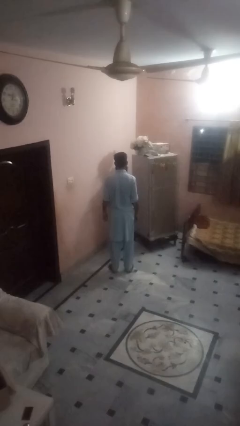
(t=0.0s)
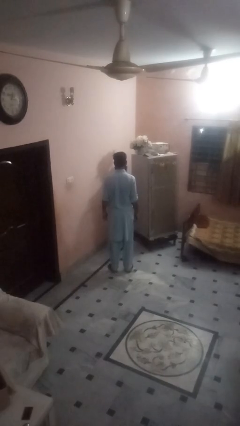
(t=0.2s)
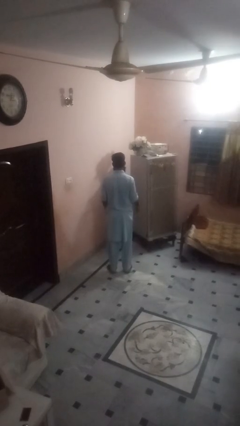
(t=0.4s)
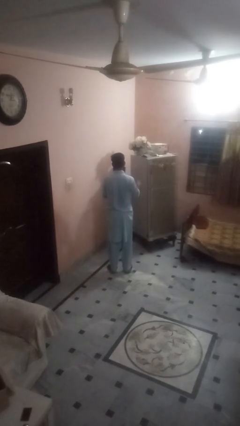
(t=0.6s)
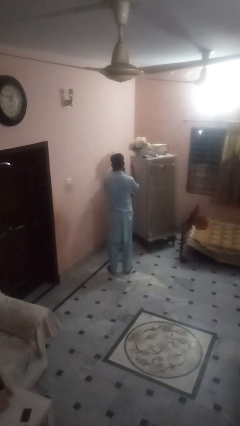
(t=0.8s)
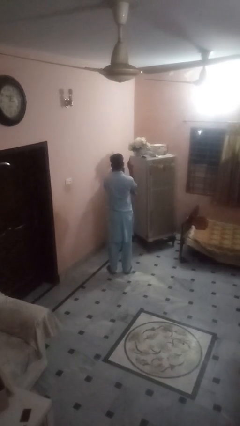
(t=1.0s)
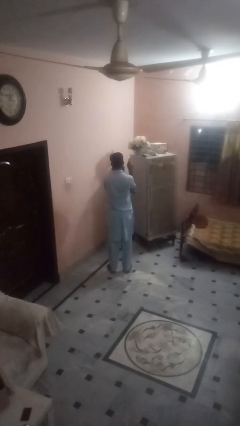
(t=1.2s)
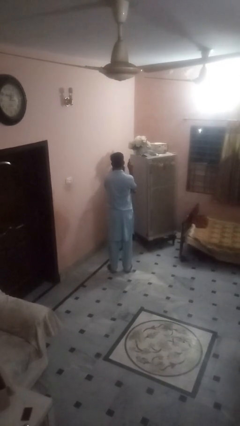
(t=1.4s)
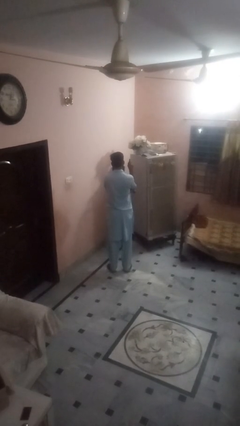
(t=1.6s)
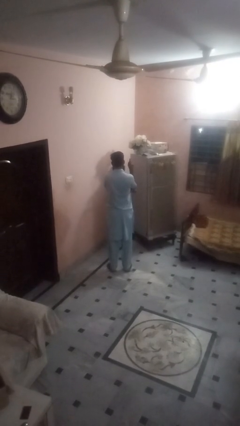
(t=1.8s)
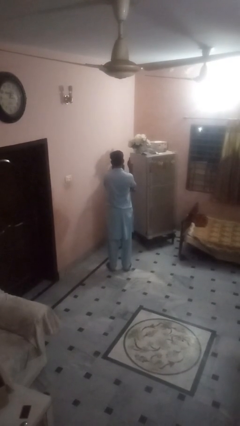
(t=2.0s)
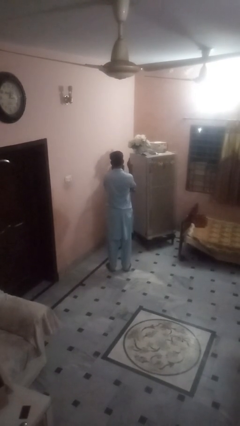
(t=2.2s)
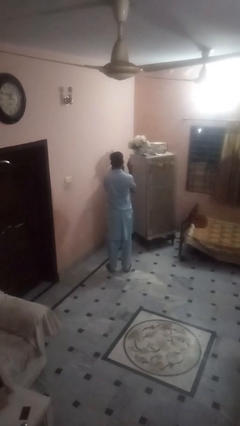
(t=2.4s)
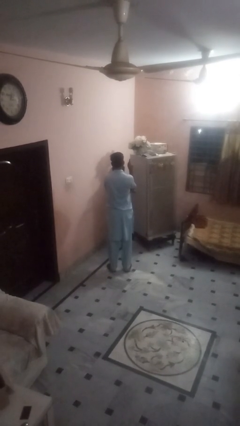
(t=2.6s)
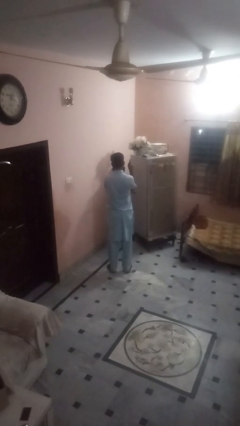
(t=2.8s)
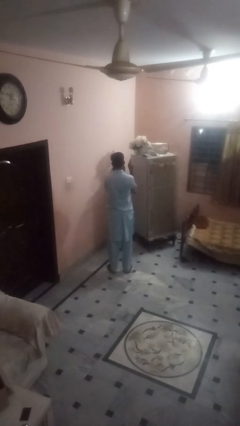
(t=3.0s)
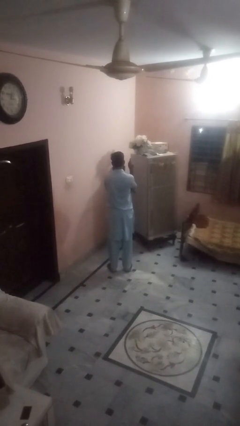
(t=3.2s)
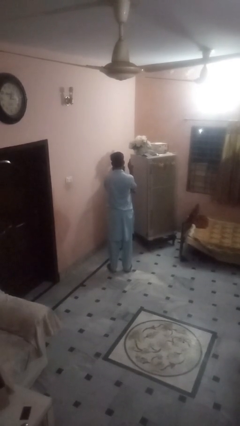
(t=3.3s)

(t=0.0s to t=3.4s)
person gestures number one

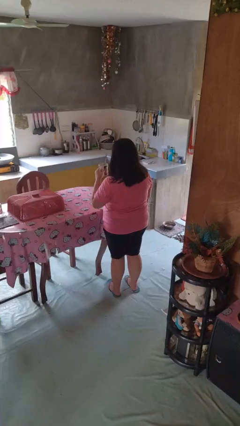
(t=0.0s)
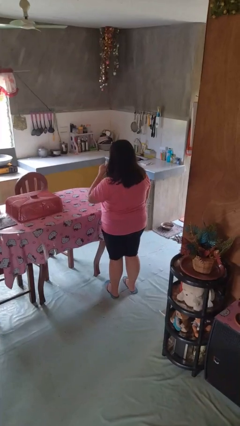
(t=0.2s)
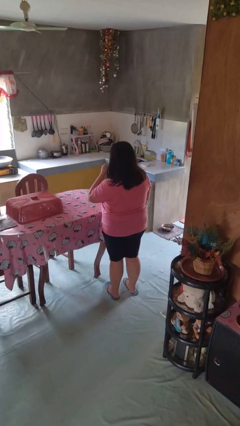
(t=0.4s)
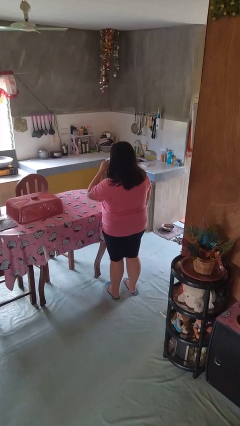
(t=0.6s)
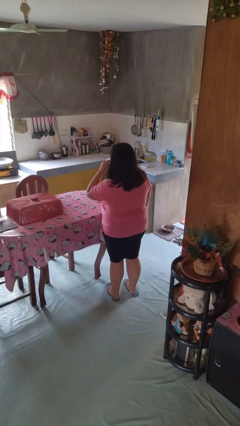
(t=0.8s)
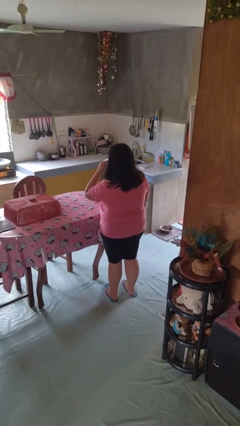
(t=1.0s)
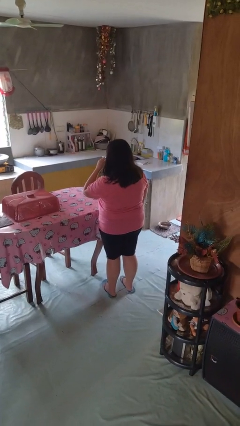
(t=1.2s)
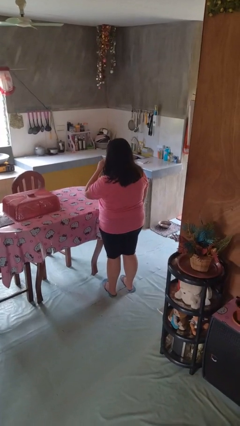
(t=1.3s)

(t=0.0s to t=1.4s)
person drinks from mug

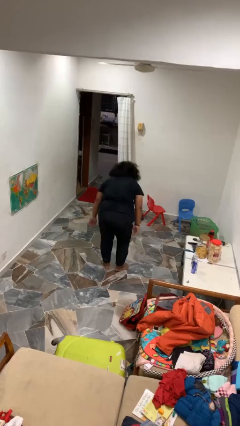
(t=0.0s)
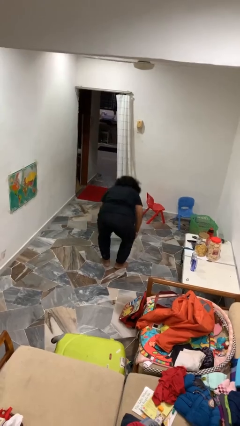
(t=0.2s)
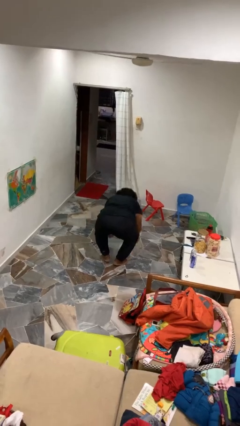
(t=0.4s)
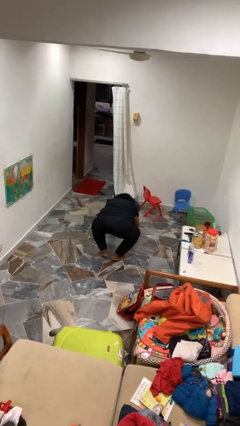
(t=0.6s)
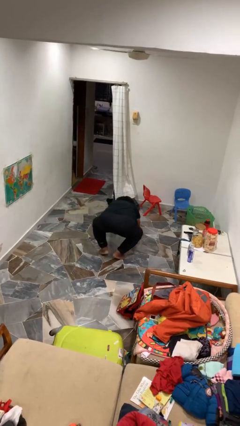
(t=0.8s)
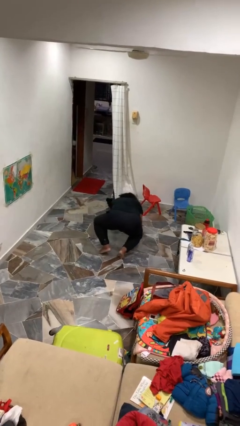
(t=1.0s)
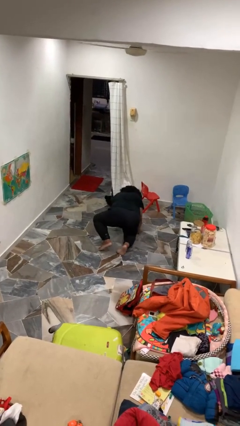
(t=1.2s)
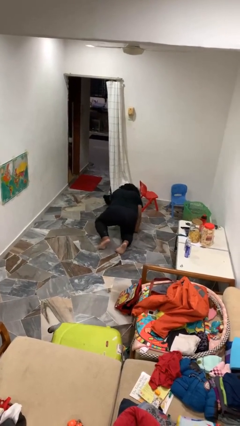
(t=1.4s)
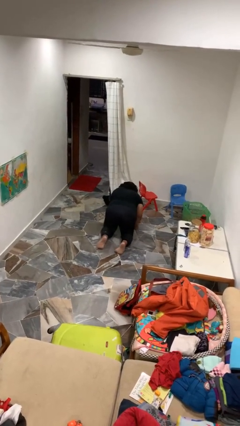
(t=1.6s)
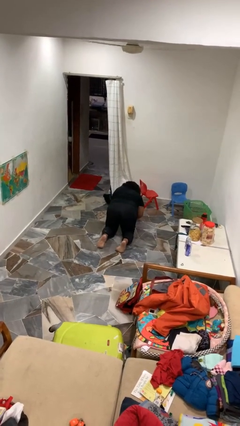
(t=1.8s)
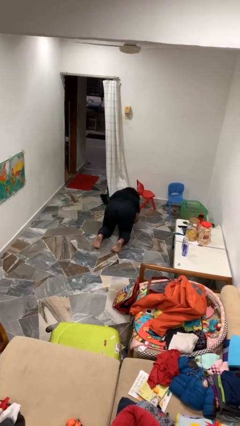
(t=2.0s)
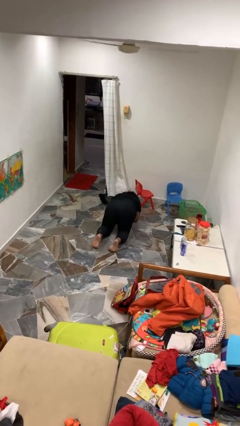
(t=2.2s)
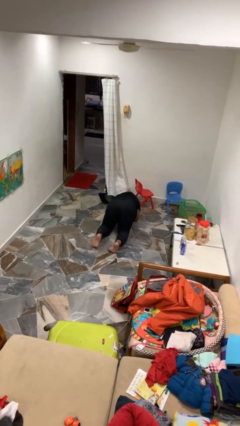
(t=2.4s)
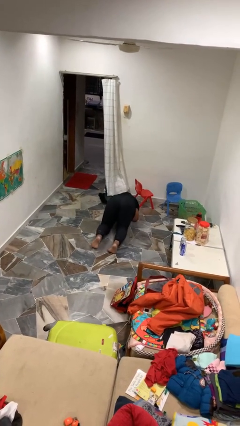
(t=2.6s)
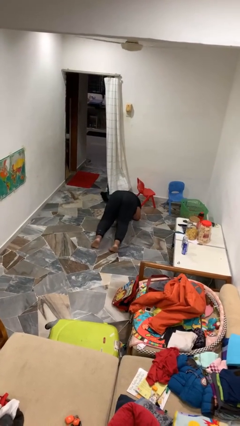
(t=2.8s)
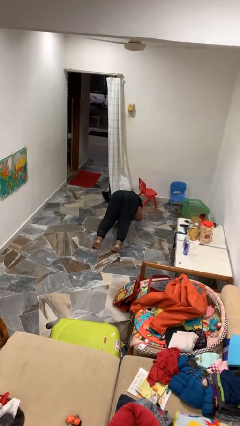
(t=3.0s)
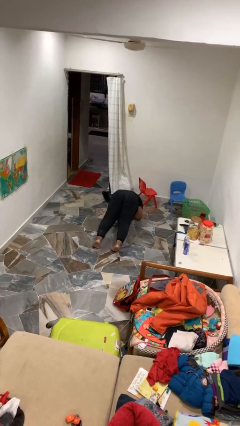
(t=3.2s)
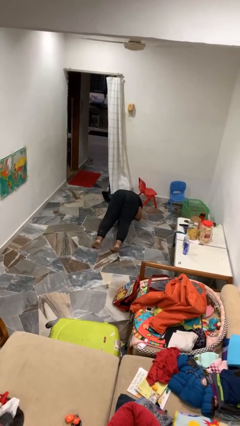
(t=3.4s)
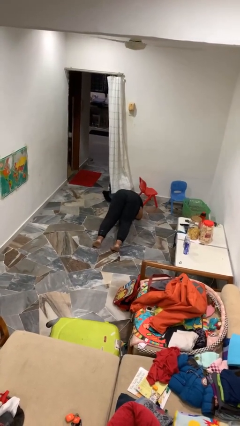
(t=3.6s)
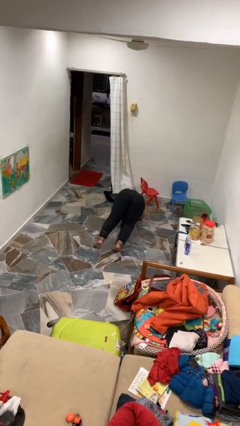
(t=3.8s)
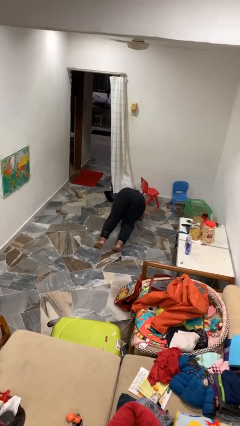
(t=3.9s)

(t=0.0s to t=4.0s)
person exercises with plank

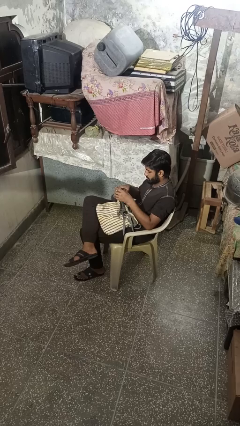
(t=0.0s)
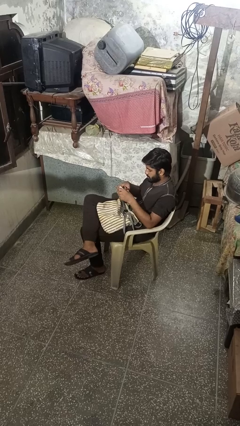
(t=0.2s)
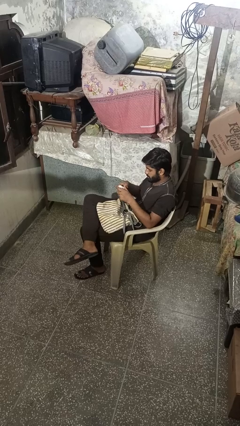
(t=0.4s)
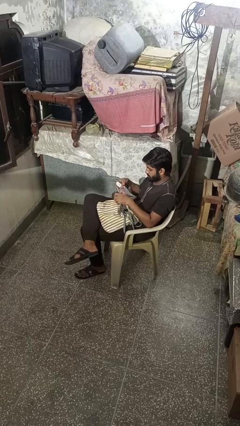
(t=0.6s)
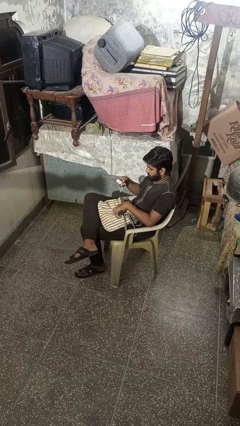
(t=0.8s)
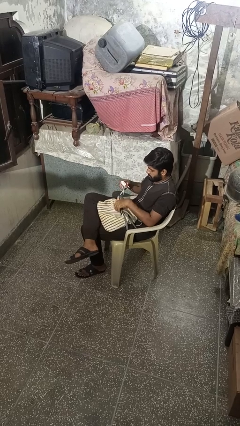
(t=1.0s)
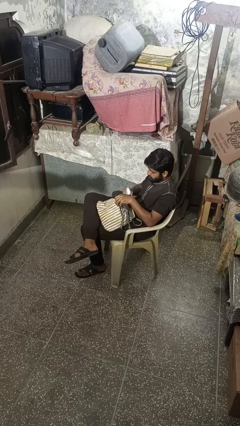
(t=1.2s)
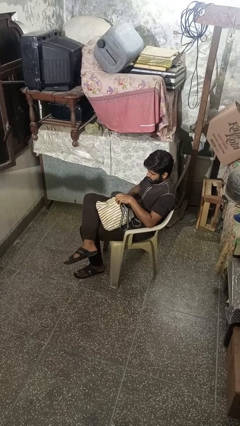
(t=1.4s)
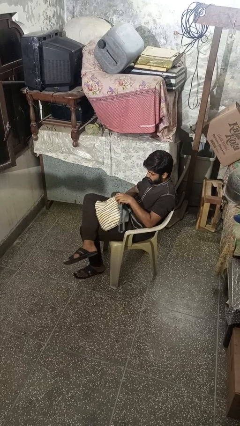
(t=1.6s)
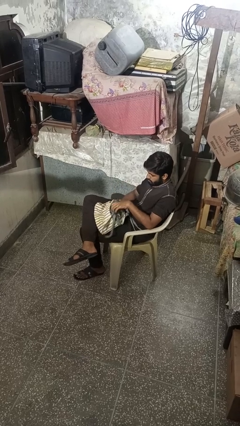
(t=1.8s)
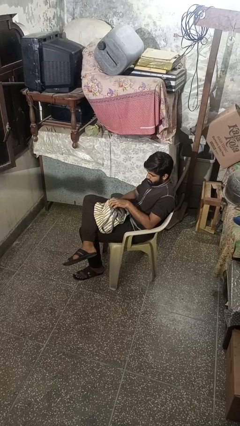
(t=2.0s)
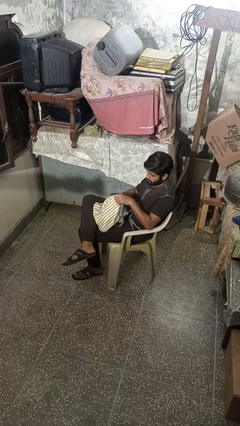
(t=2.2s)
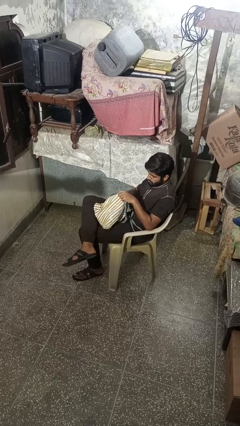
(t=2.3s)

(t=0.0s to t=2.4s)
person puts object into purse

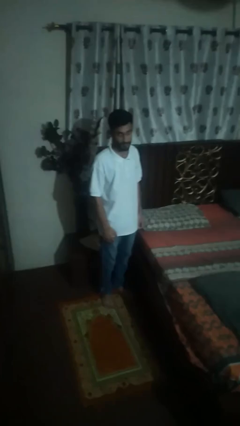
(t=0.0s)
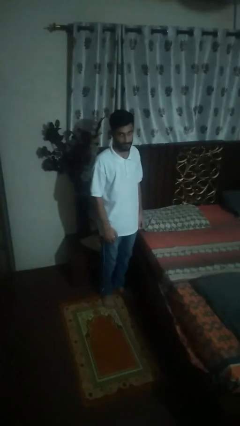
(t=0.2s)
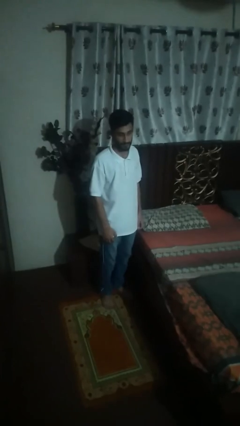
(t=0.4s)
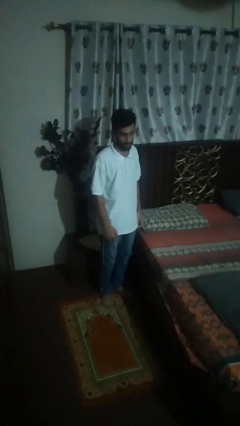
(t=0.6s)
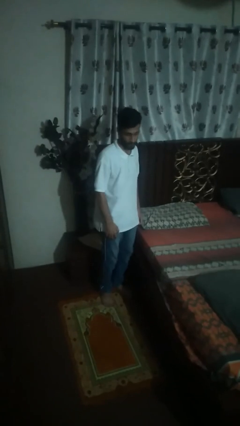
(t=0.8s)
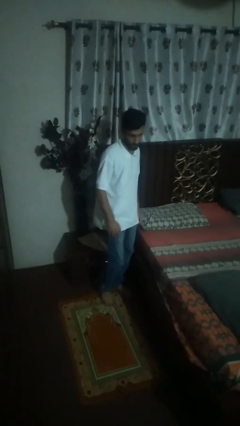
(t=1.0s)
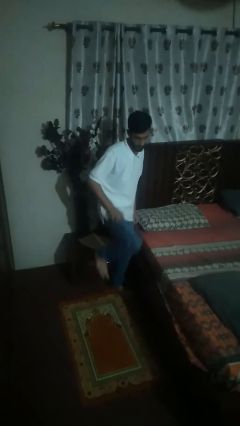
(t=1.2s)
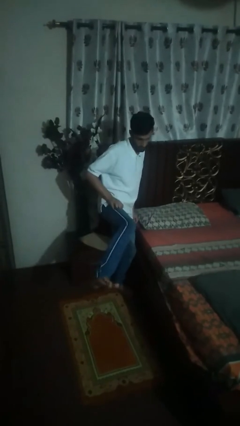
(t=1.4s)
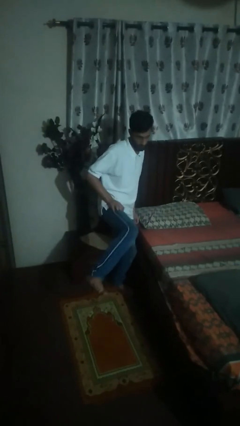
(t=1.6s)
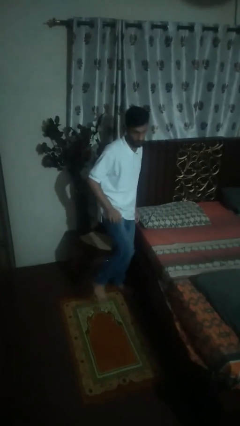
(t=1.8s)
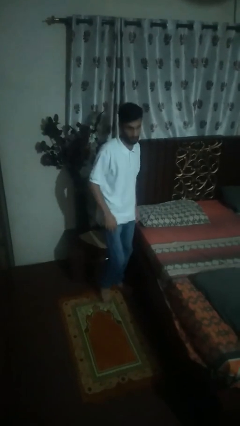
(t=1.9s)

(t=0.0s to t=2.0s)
person karate kicks

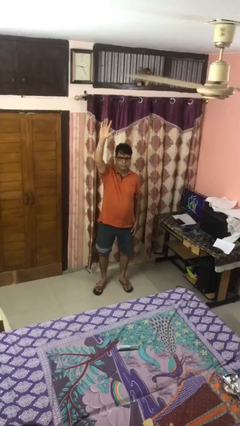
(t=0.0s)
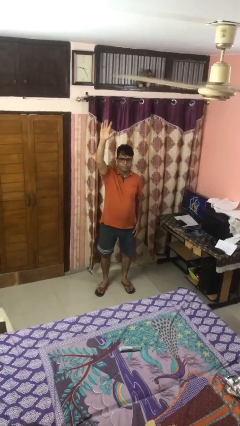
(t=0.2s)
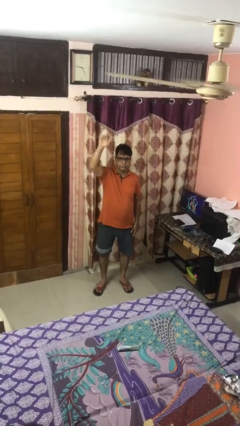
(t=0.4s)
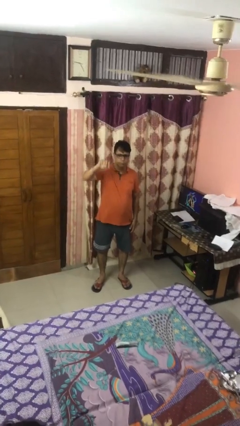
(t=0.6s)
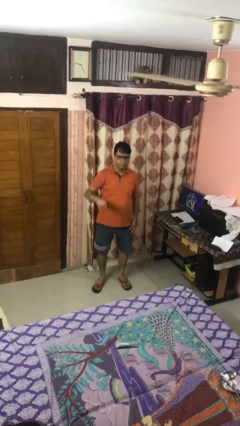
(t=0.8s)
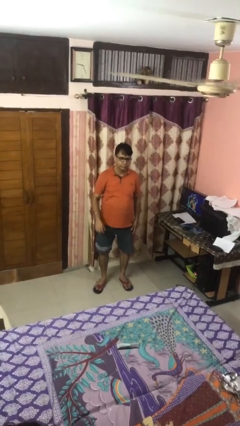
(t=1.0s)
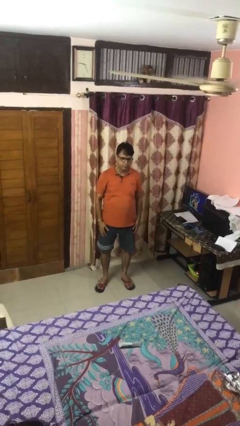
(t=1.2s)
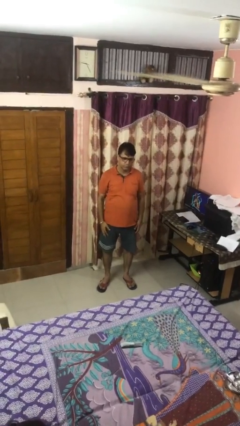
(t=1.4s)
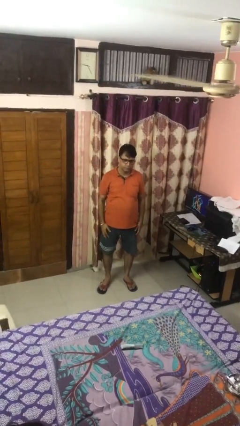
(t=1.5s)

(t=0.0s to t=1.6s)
person gestures lower hand

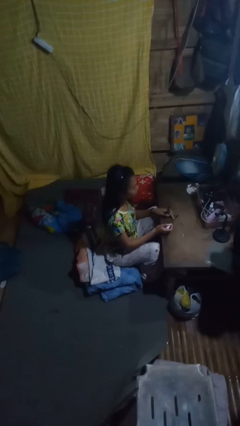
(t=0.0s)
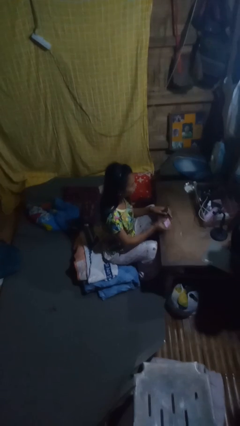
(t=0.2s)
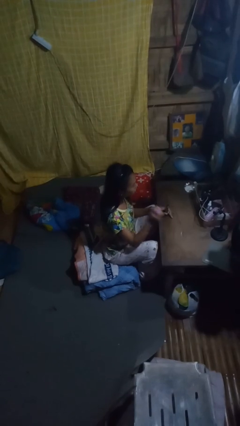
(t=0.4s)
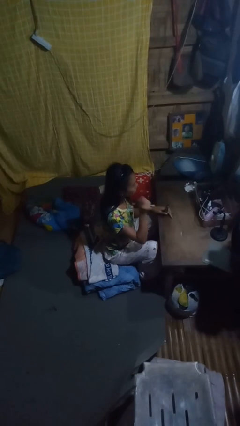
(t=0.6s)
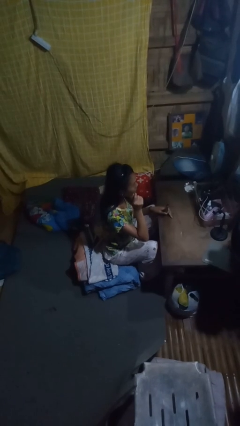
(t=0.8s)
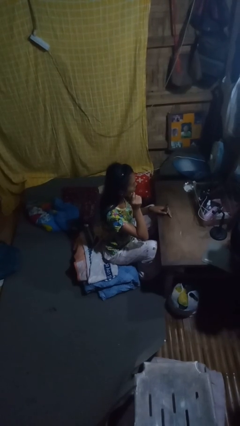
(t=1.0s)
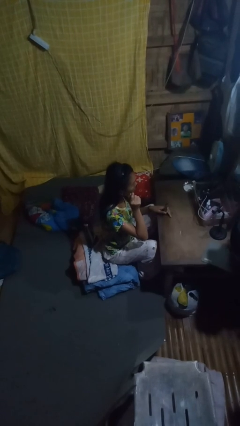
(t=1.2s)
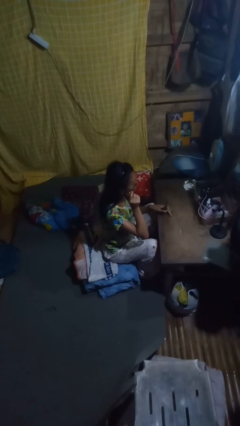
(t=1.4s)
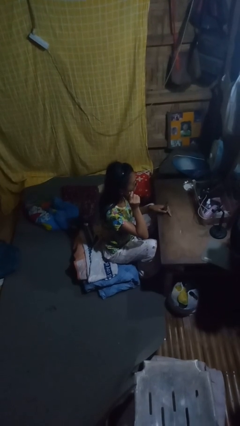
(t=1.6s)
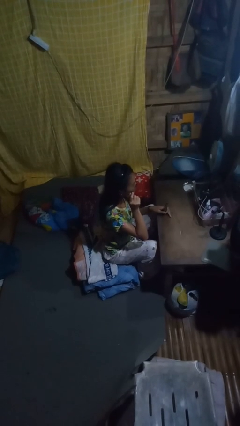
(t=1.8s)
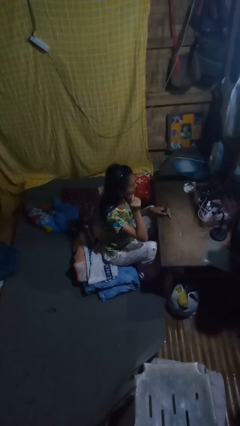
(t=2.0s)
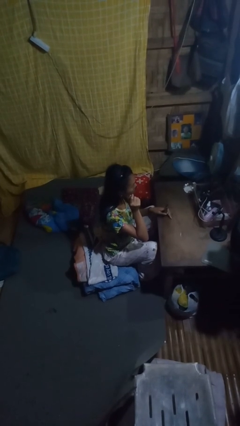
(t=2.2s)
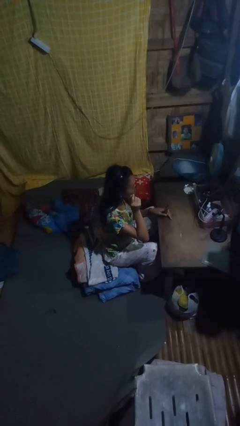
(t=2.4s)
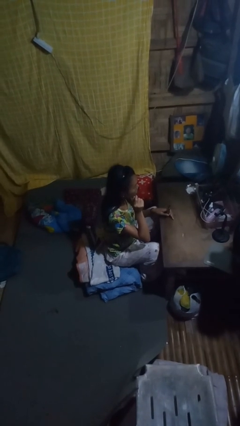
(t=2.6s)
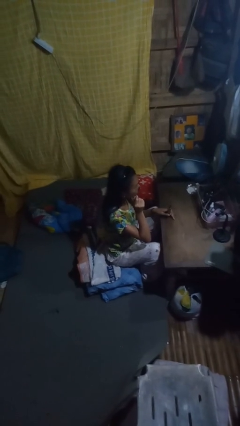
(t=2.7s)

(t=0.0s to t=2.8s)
person applies eye makeup
